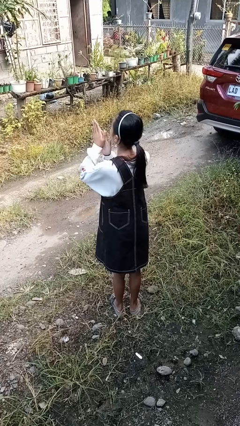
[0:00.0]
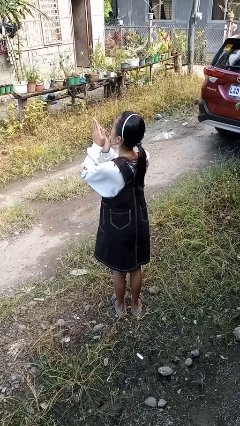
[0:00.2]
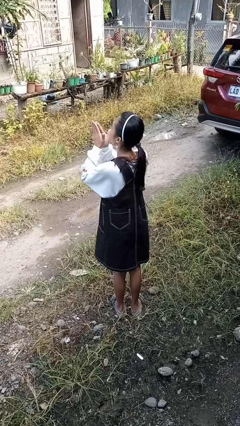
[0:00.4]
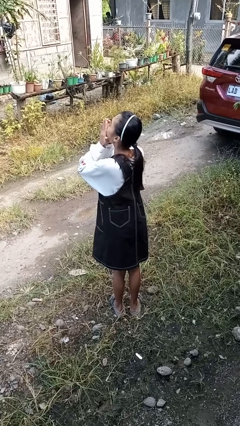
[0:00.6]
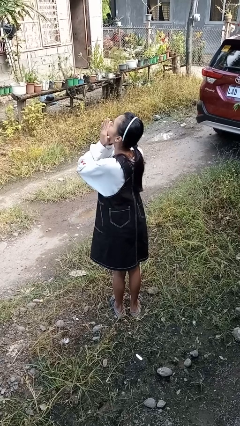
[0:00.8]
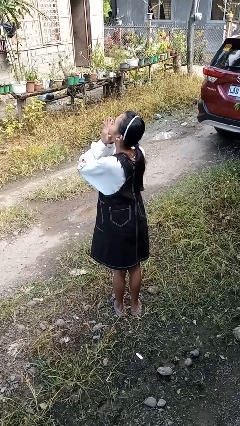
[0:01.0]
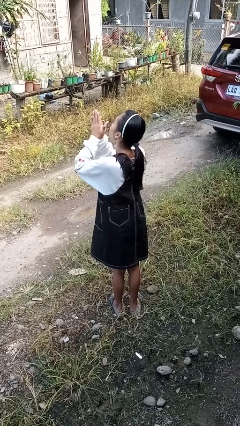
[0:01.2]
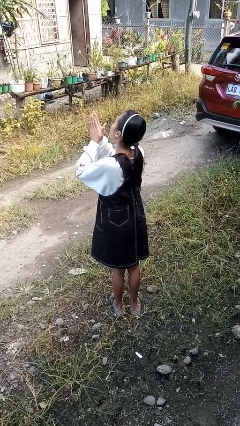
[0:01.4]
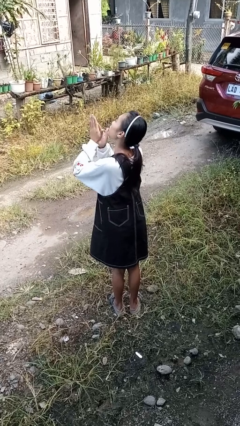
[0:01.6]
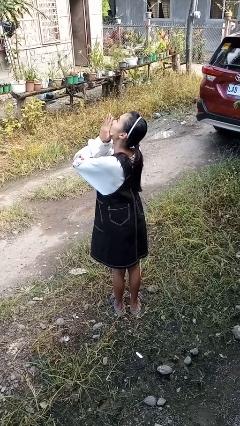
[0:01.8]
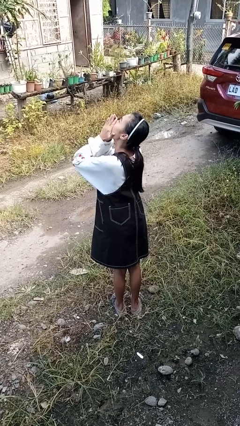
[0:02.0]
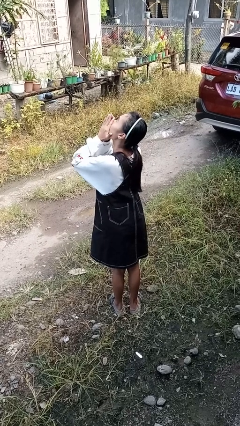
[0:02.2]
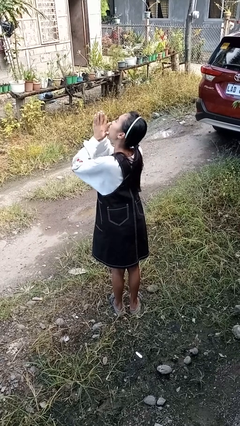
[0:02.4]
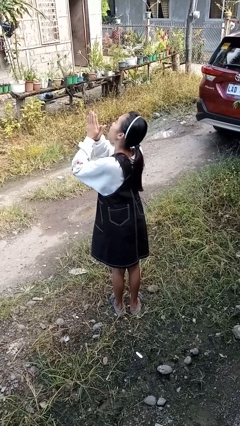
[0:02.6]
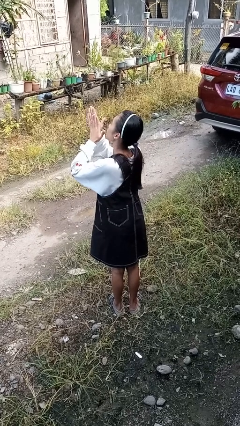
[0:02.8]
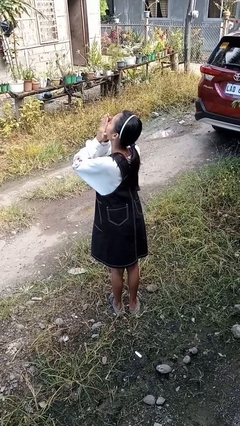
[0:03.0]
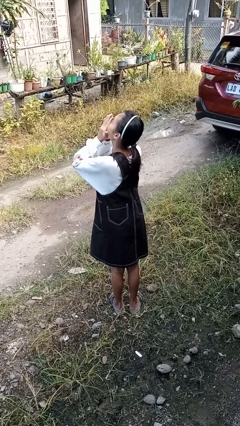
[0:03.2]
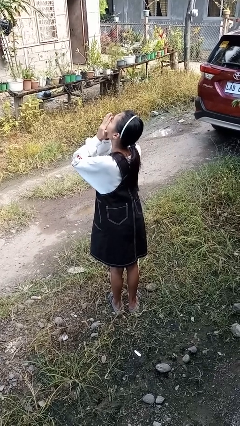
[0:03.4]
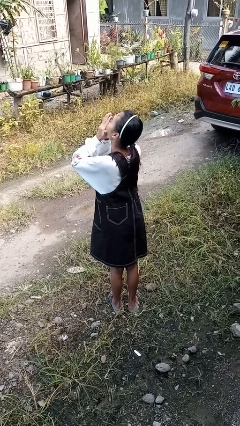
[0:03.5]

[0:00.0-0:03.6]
person blows into hands

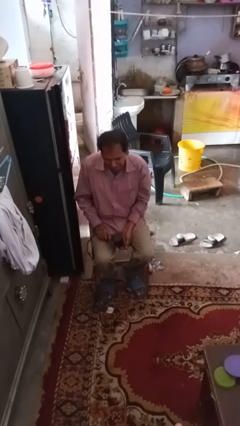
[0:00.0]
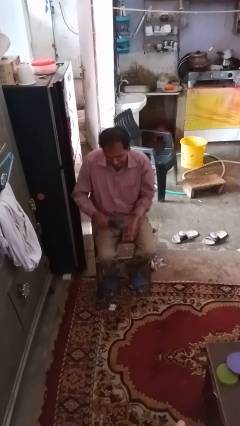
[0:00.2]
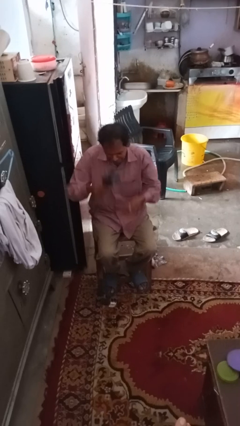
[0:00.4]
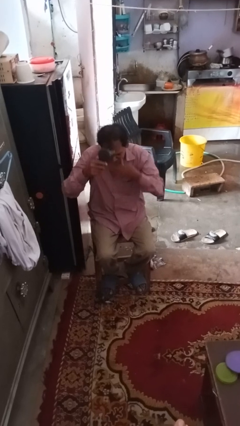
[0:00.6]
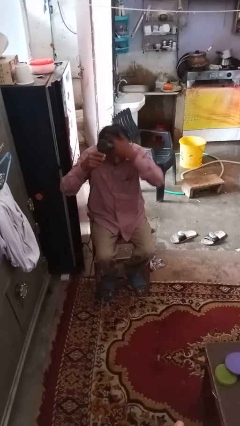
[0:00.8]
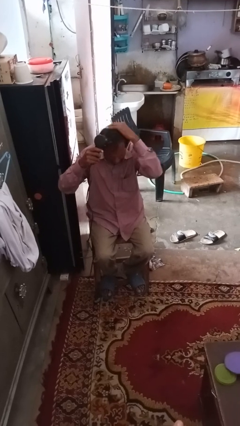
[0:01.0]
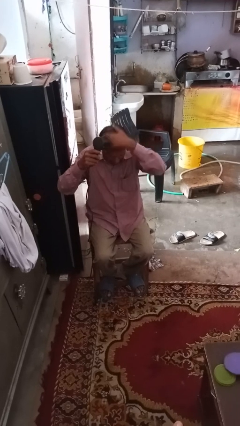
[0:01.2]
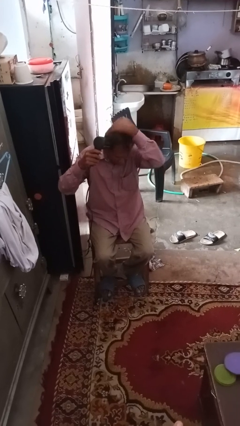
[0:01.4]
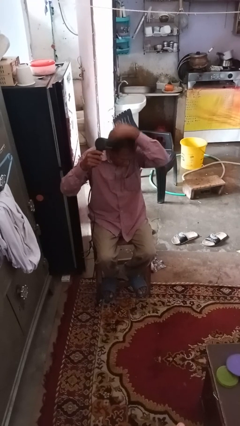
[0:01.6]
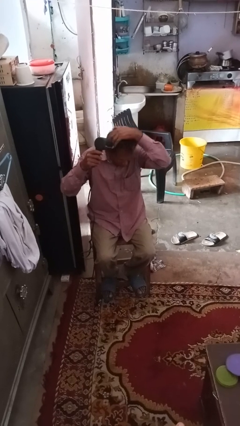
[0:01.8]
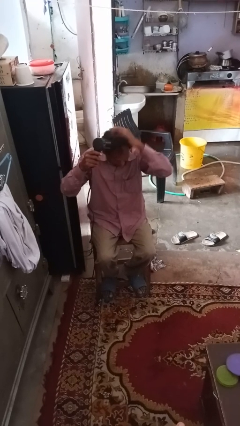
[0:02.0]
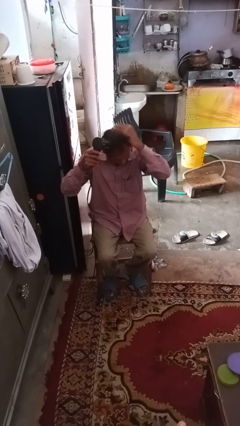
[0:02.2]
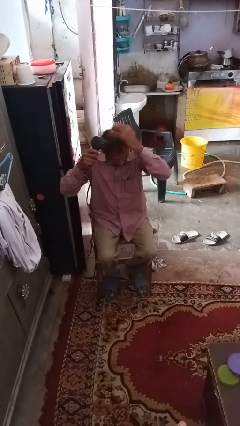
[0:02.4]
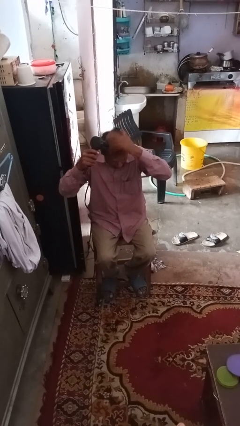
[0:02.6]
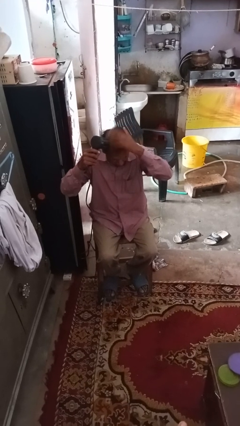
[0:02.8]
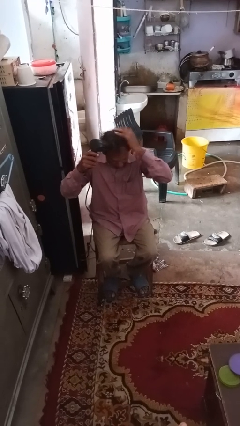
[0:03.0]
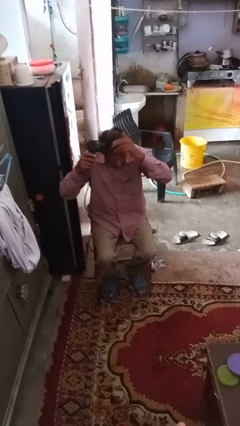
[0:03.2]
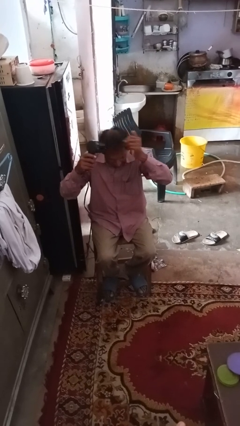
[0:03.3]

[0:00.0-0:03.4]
person dries hair with hairdryer

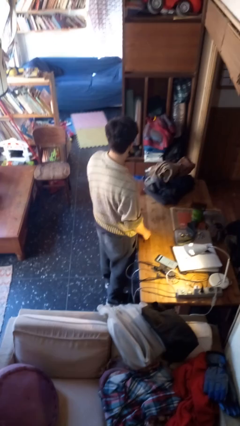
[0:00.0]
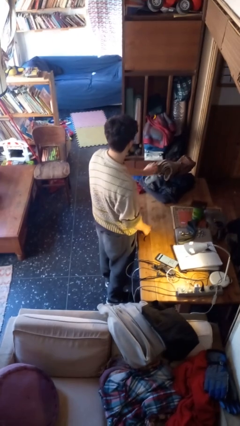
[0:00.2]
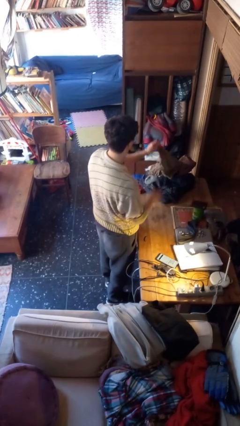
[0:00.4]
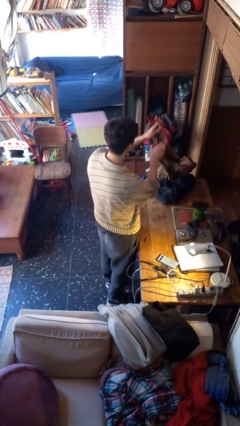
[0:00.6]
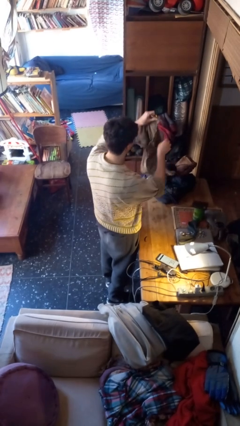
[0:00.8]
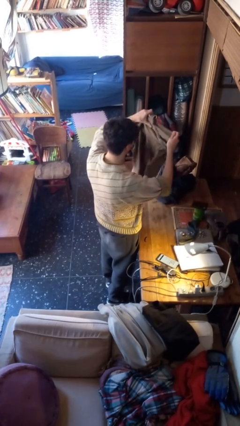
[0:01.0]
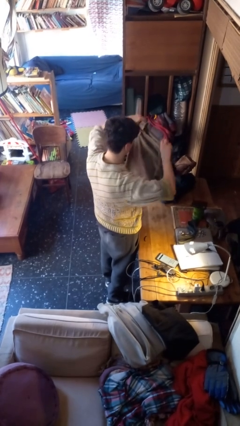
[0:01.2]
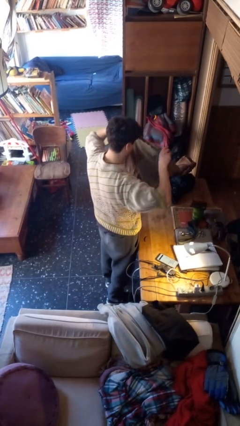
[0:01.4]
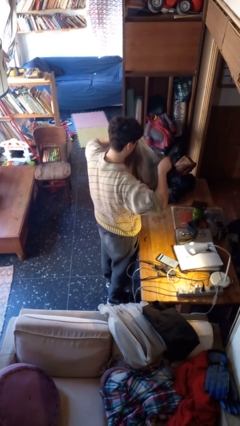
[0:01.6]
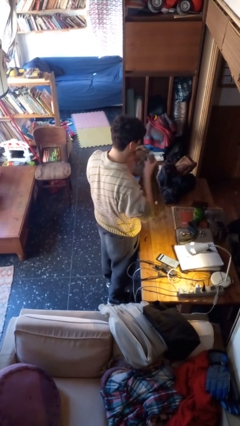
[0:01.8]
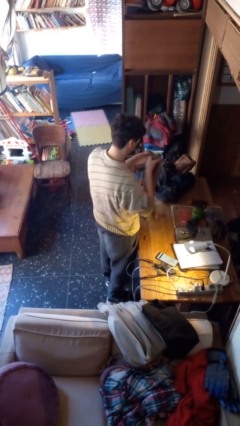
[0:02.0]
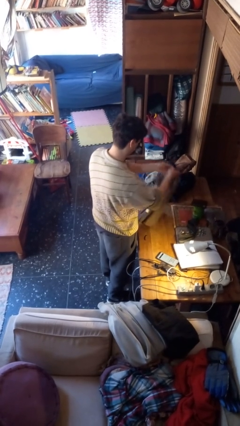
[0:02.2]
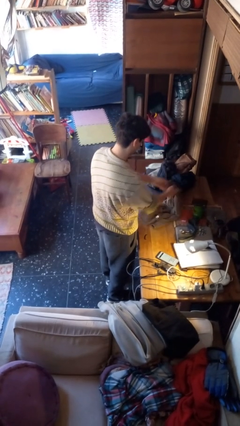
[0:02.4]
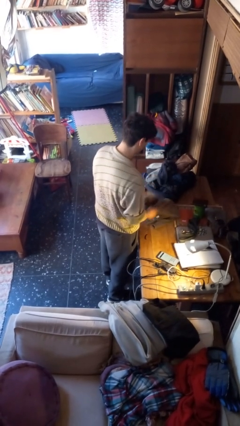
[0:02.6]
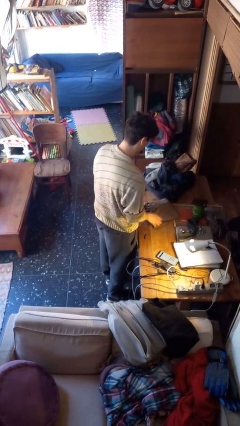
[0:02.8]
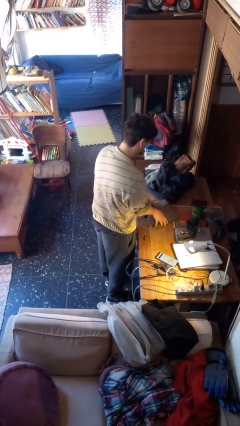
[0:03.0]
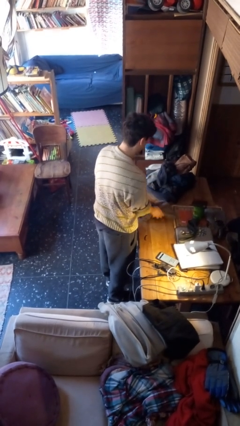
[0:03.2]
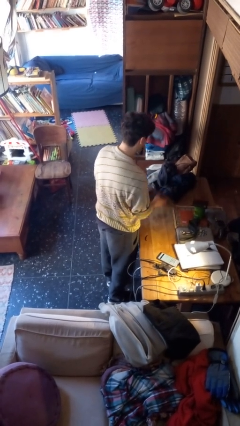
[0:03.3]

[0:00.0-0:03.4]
person folds shirt

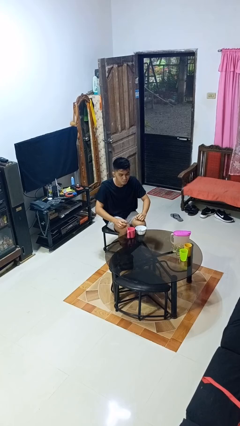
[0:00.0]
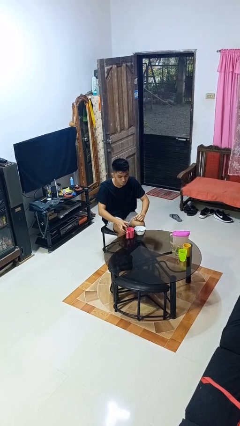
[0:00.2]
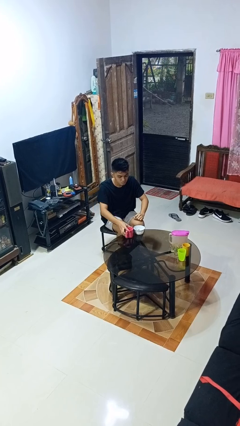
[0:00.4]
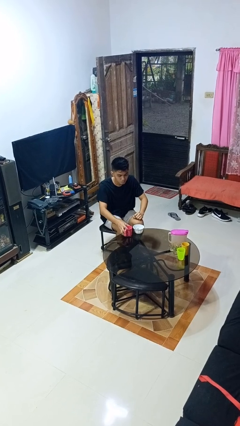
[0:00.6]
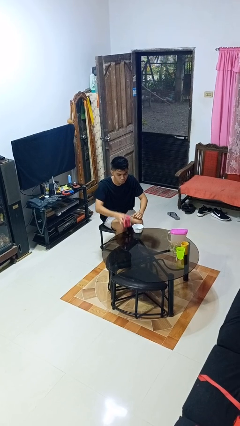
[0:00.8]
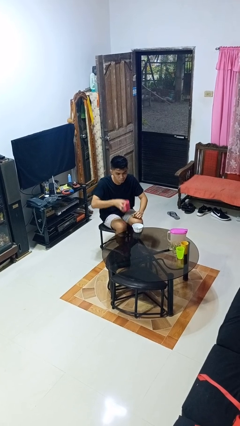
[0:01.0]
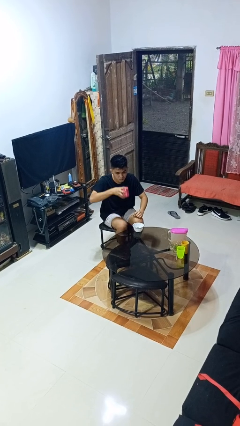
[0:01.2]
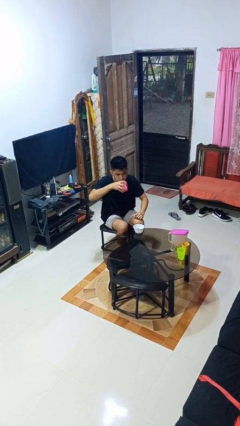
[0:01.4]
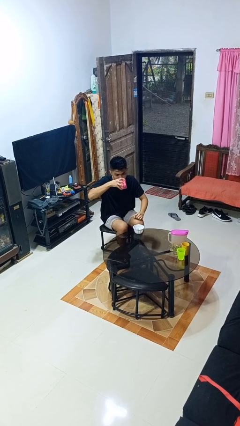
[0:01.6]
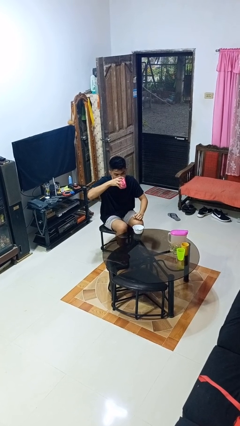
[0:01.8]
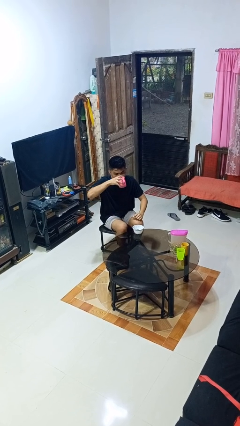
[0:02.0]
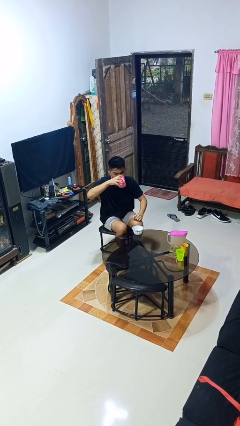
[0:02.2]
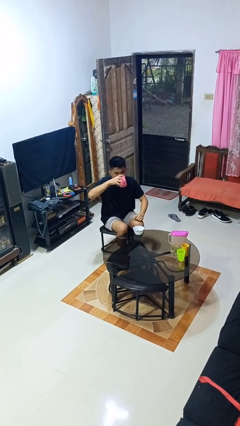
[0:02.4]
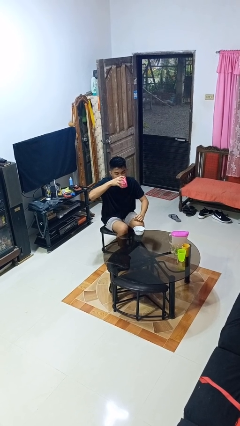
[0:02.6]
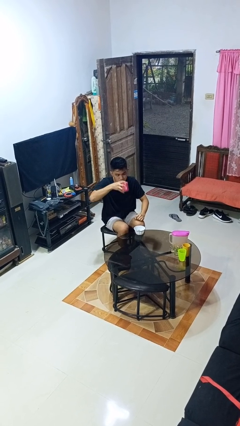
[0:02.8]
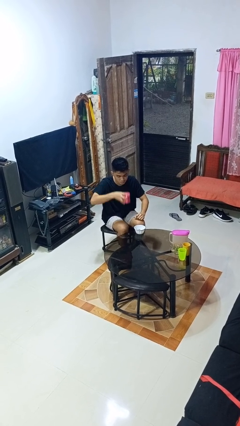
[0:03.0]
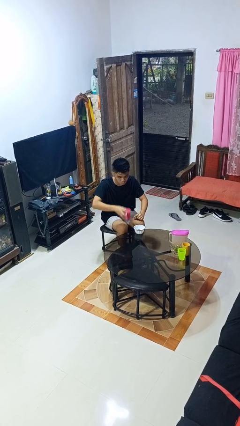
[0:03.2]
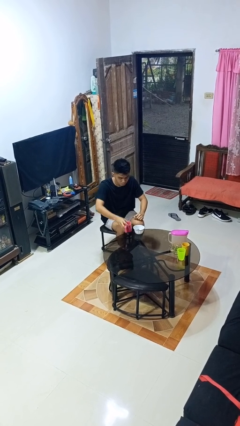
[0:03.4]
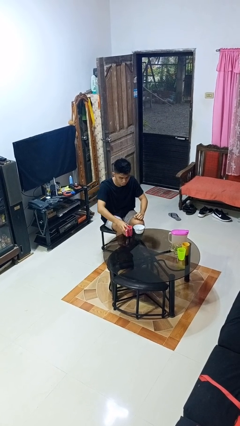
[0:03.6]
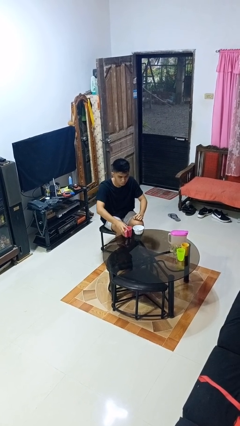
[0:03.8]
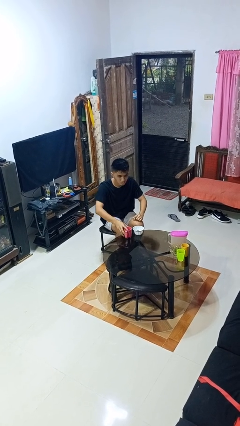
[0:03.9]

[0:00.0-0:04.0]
person drinks from cup

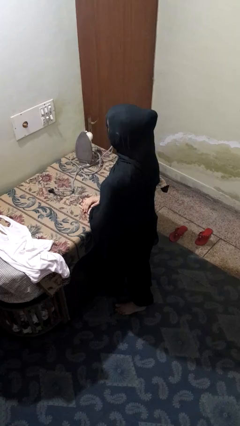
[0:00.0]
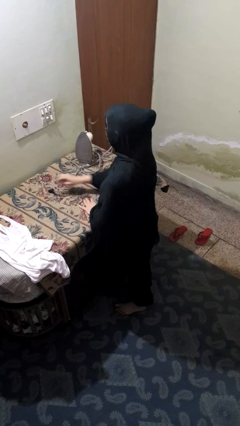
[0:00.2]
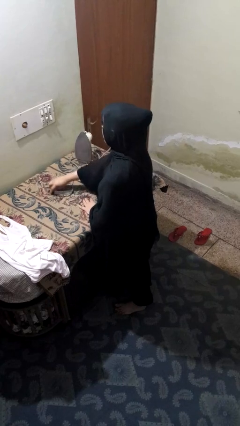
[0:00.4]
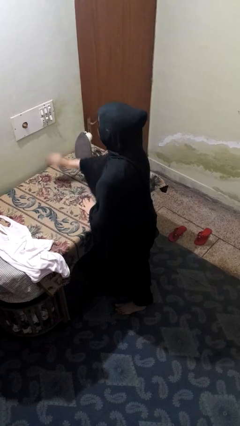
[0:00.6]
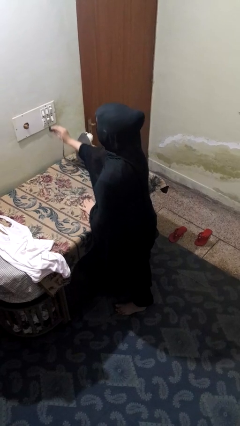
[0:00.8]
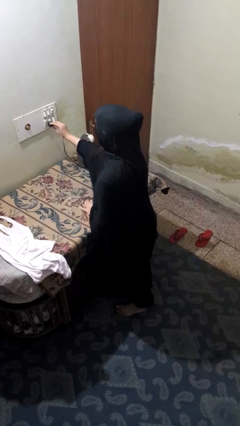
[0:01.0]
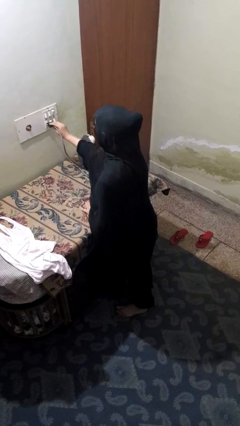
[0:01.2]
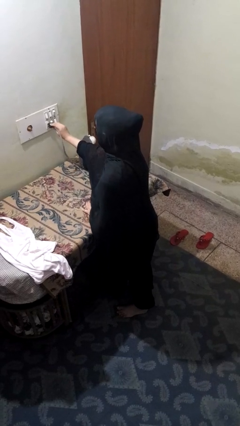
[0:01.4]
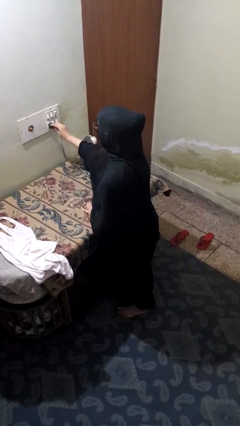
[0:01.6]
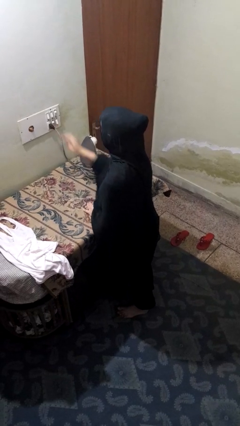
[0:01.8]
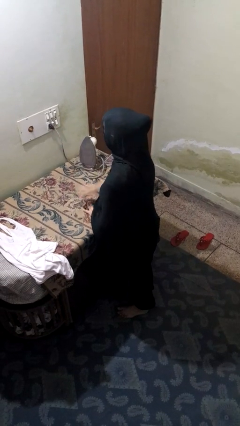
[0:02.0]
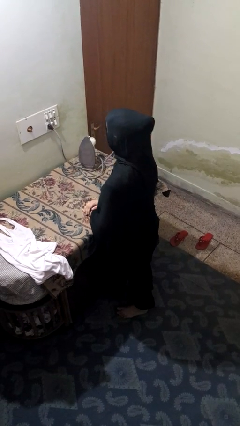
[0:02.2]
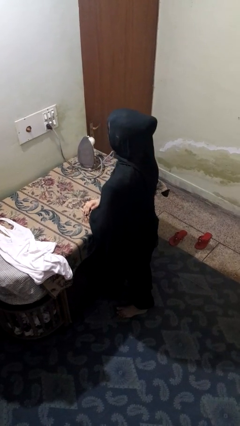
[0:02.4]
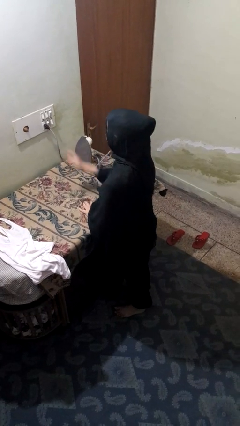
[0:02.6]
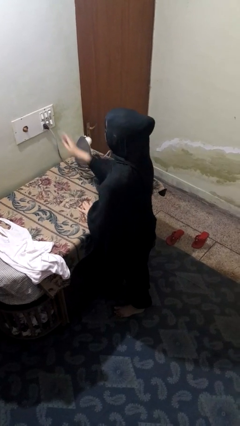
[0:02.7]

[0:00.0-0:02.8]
person plugs into electrical socket

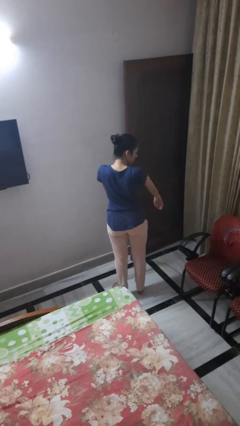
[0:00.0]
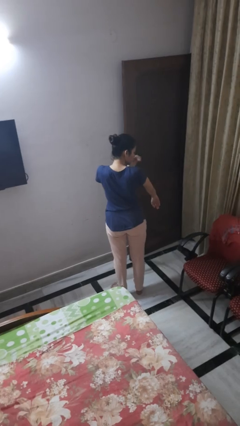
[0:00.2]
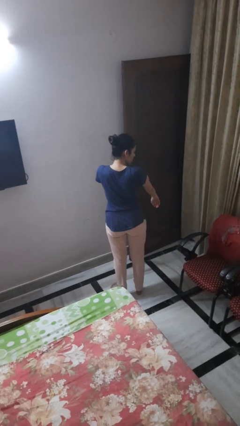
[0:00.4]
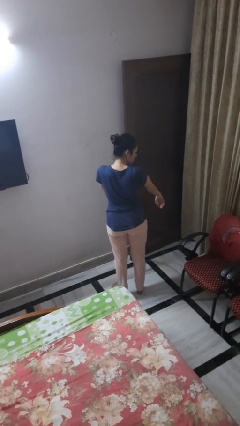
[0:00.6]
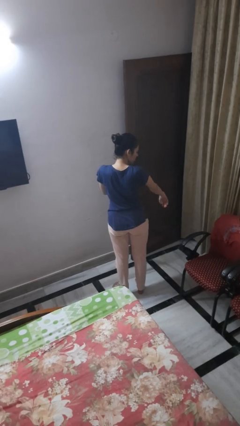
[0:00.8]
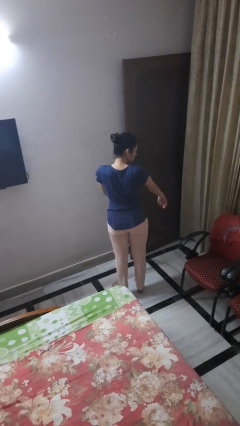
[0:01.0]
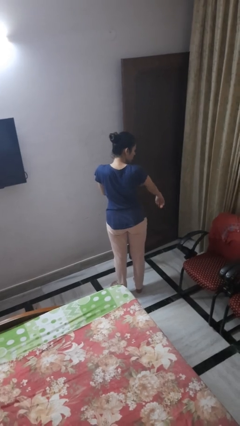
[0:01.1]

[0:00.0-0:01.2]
person swats bug
